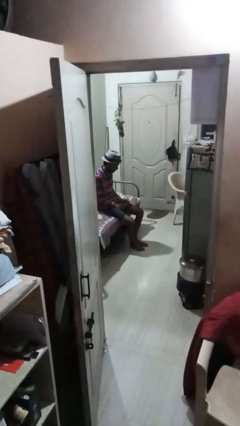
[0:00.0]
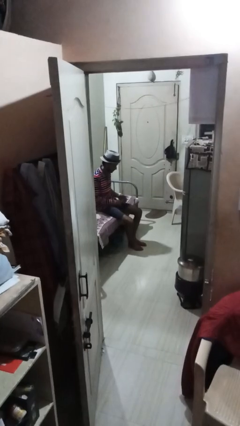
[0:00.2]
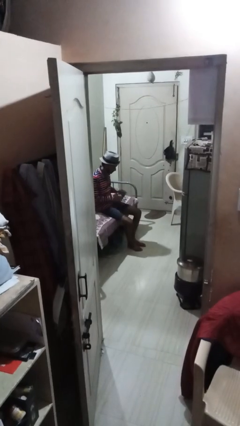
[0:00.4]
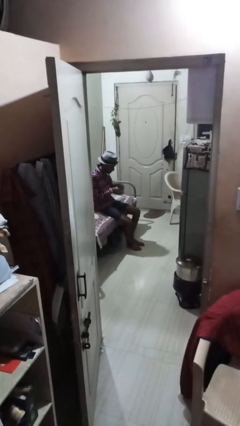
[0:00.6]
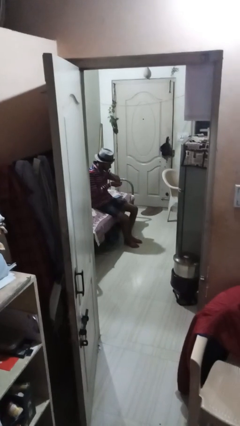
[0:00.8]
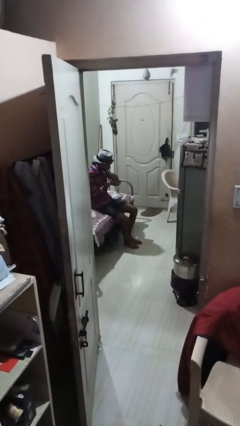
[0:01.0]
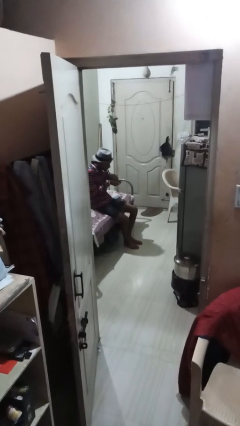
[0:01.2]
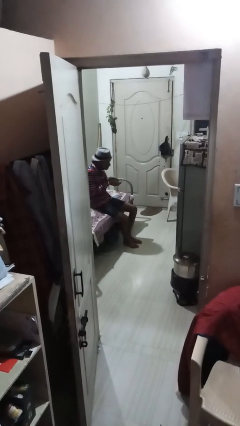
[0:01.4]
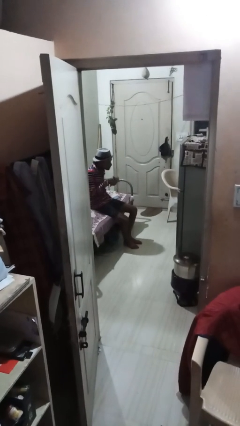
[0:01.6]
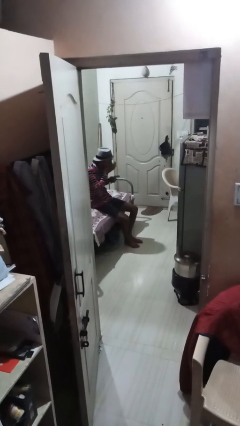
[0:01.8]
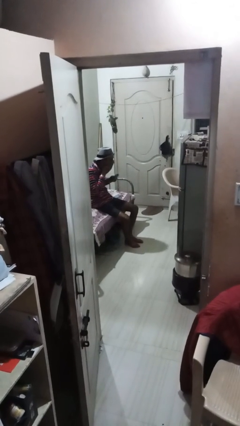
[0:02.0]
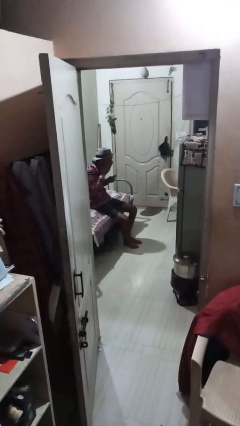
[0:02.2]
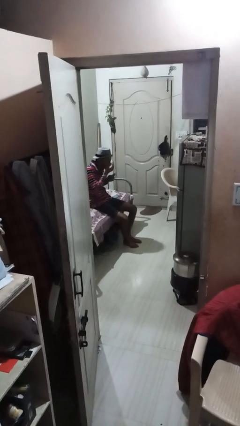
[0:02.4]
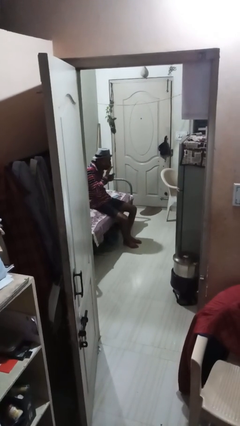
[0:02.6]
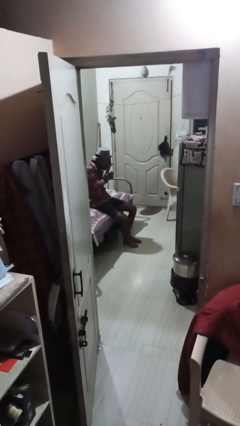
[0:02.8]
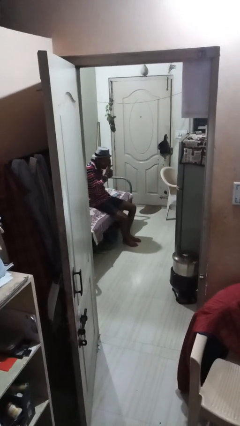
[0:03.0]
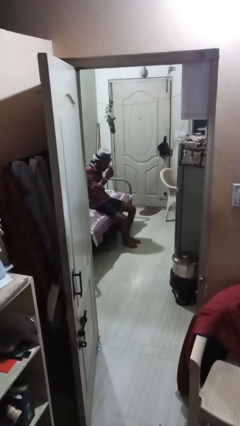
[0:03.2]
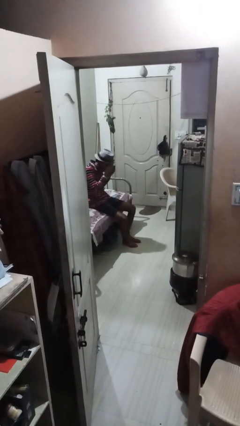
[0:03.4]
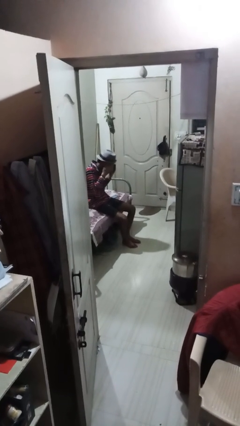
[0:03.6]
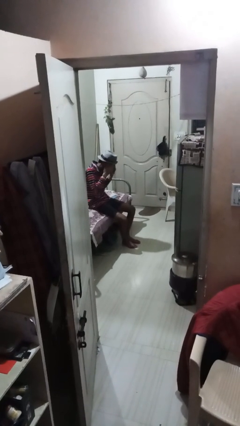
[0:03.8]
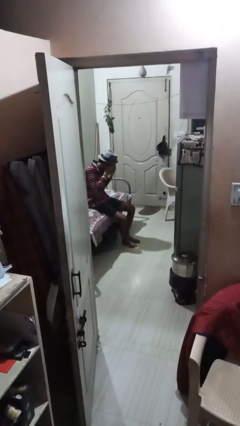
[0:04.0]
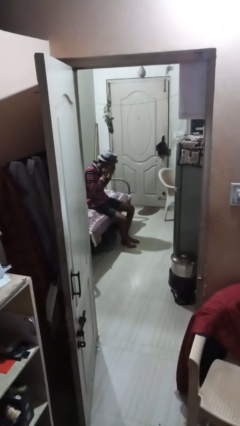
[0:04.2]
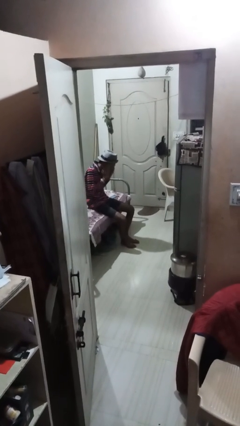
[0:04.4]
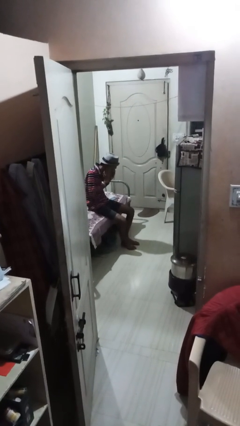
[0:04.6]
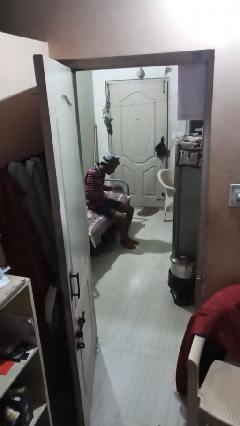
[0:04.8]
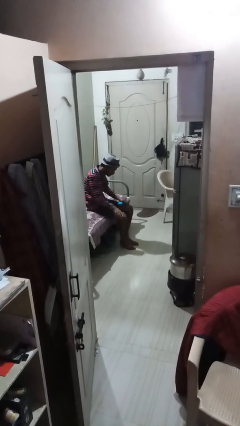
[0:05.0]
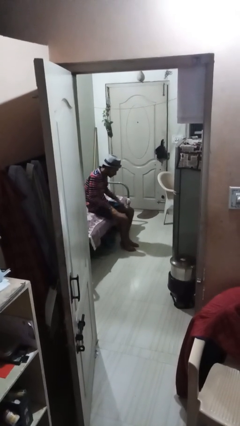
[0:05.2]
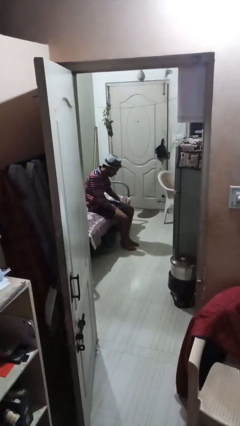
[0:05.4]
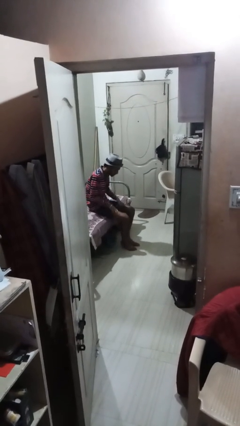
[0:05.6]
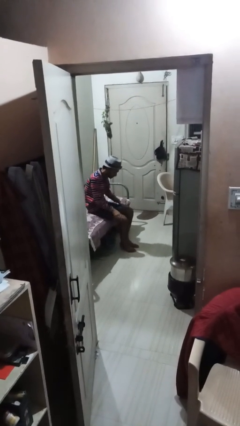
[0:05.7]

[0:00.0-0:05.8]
person applies facial moisturizer

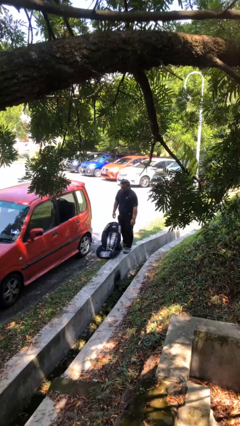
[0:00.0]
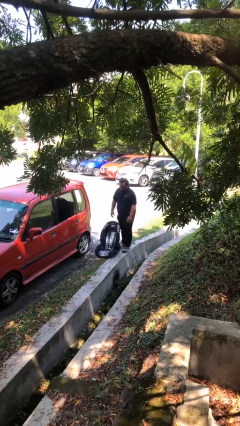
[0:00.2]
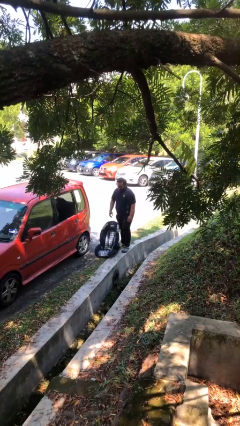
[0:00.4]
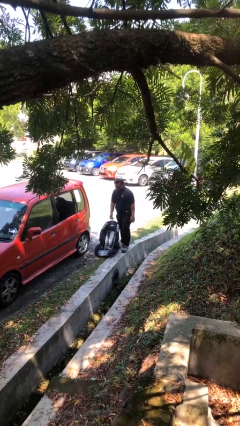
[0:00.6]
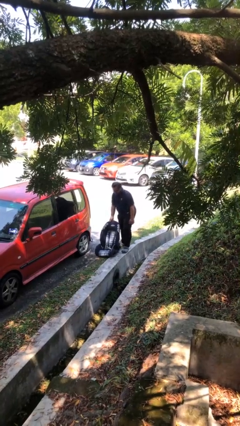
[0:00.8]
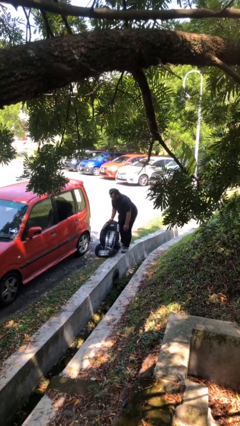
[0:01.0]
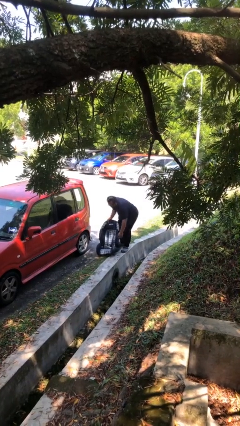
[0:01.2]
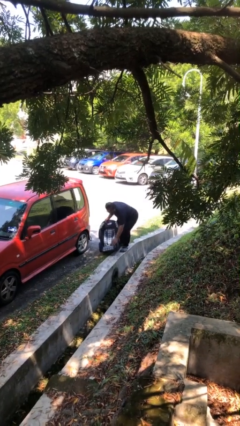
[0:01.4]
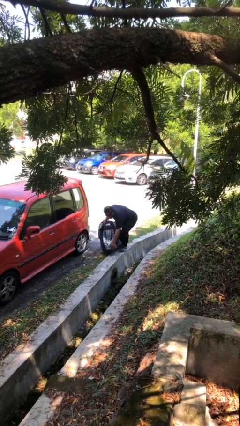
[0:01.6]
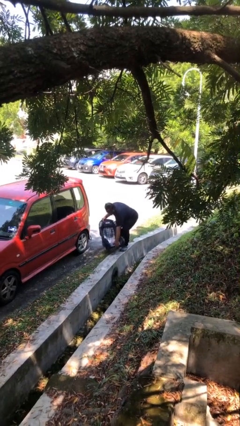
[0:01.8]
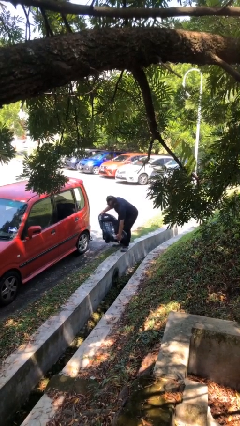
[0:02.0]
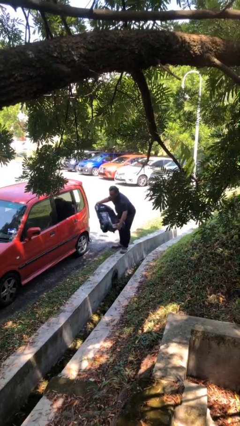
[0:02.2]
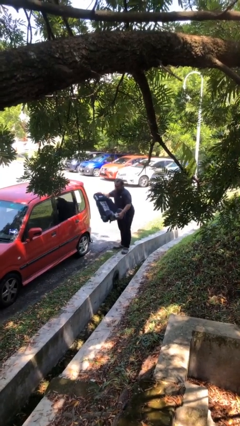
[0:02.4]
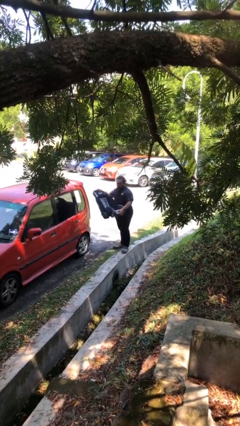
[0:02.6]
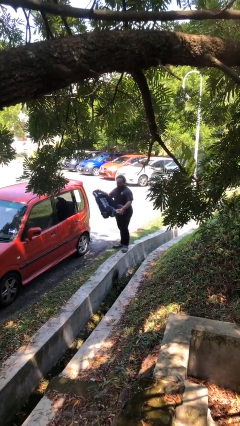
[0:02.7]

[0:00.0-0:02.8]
person picks up object from floor

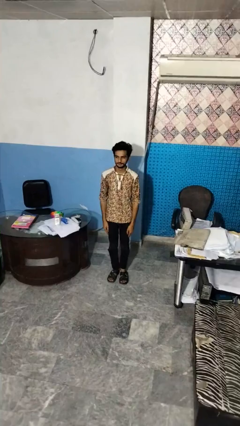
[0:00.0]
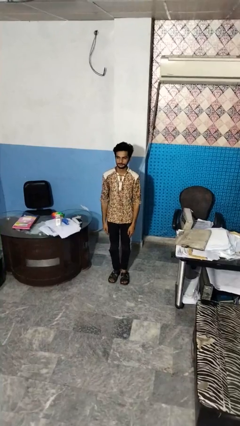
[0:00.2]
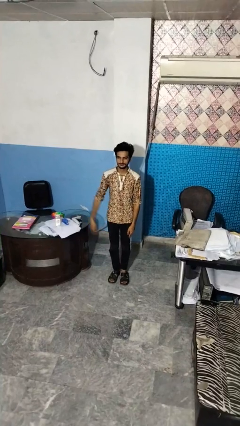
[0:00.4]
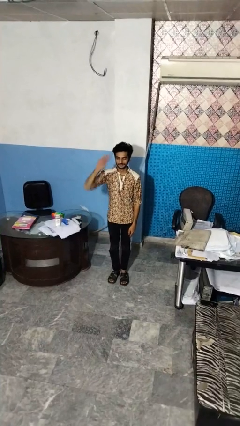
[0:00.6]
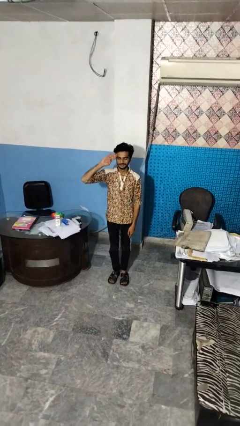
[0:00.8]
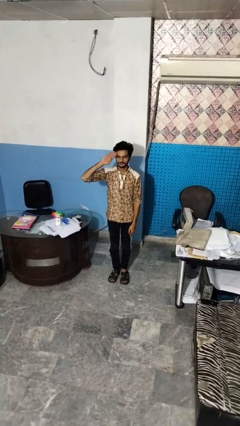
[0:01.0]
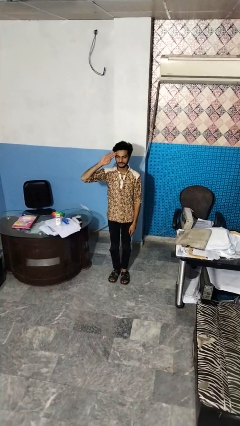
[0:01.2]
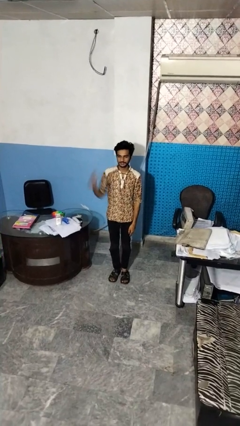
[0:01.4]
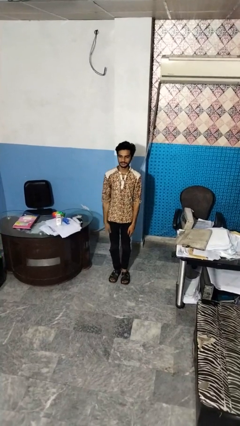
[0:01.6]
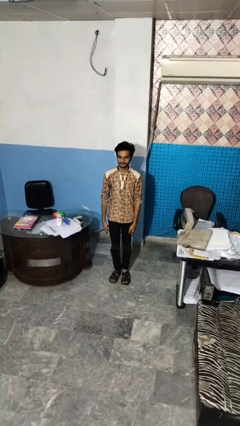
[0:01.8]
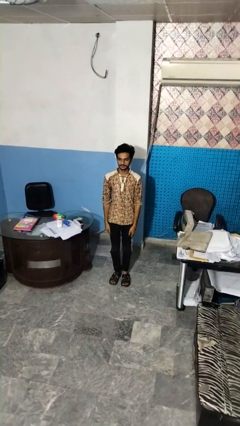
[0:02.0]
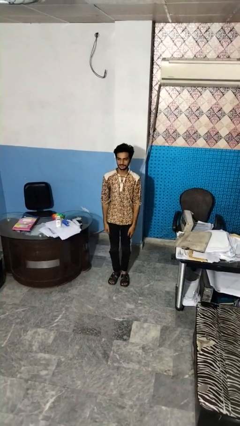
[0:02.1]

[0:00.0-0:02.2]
person salutes

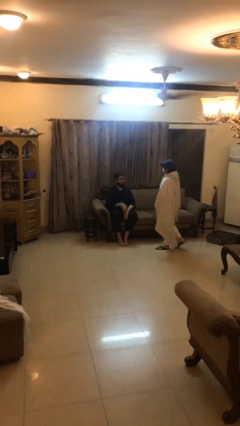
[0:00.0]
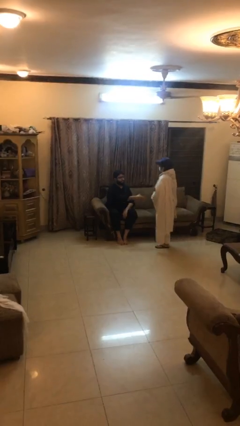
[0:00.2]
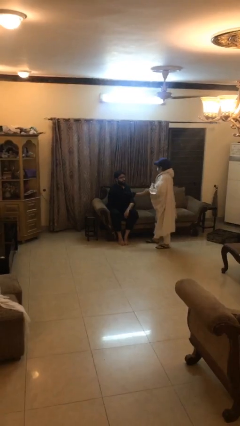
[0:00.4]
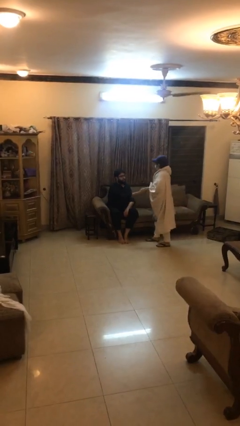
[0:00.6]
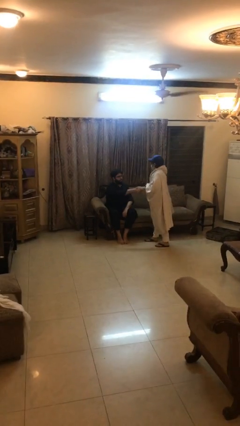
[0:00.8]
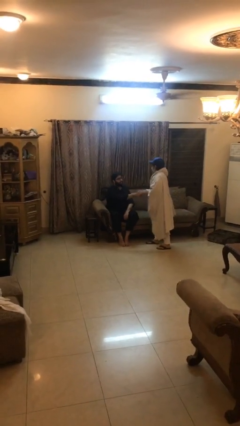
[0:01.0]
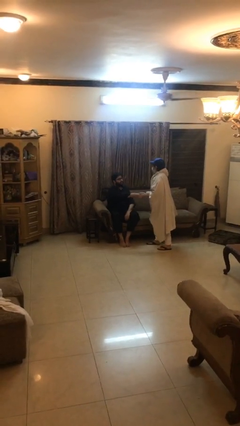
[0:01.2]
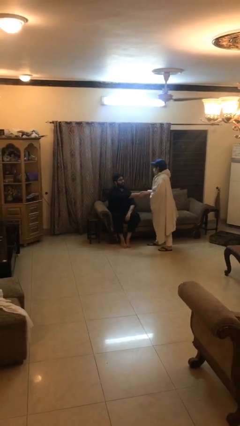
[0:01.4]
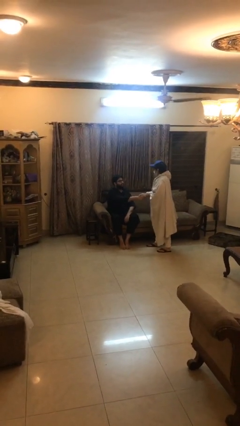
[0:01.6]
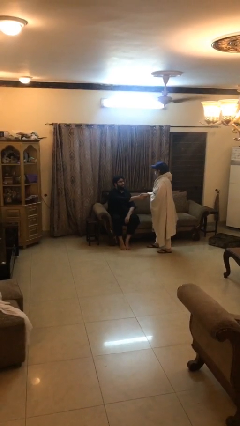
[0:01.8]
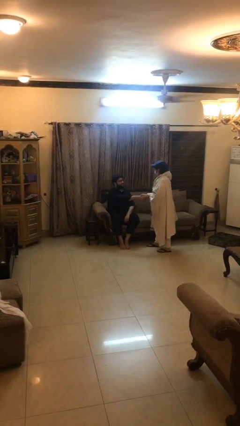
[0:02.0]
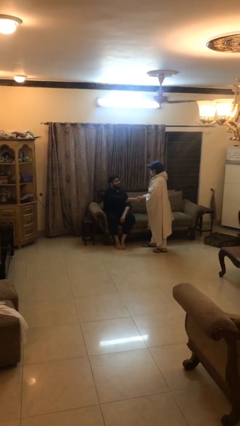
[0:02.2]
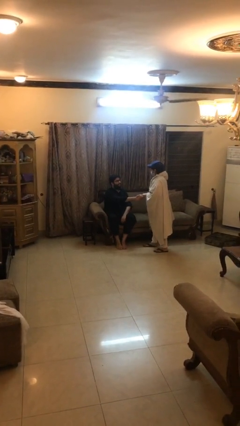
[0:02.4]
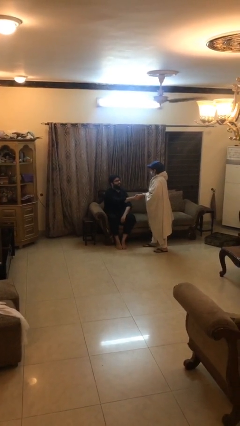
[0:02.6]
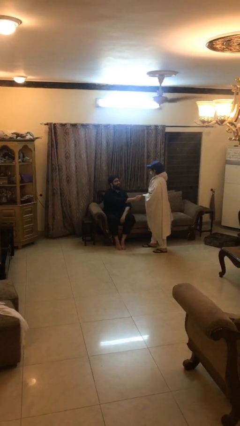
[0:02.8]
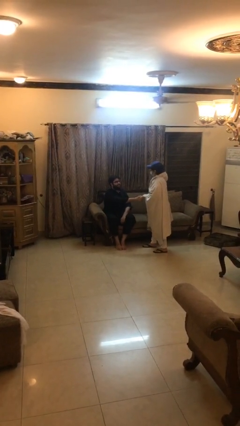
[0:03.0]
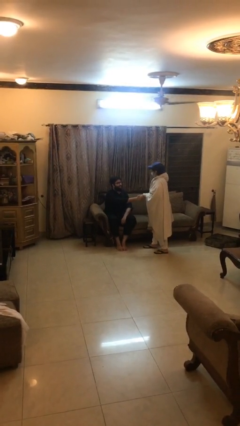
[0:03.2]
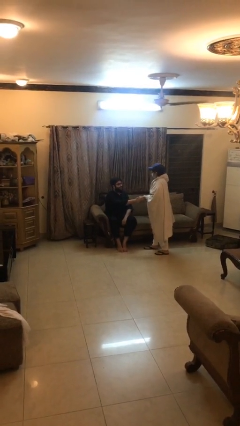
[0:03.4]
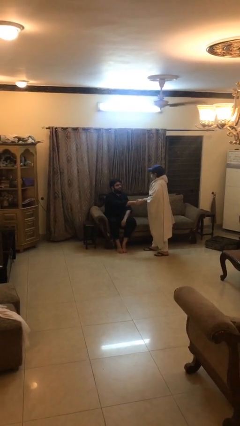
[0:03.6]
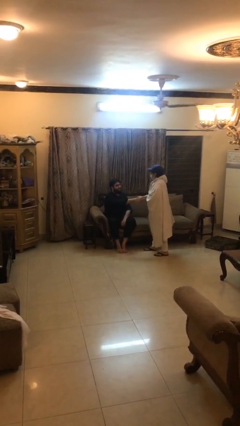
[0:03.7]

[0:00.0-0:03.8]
person shakes hand

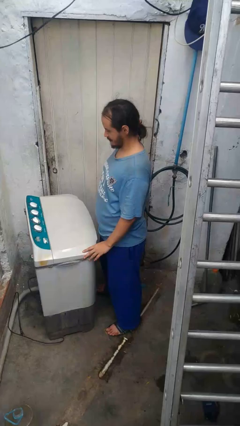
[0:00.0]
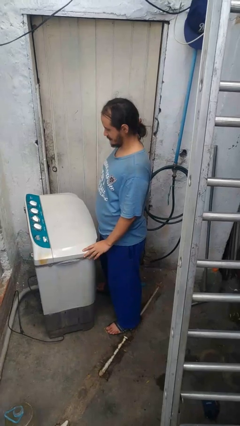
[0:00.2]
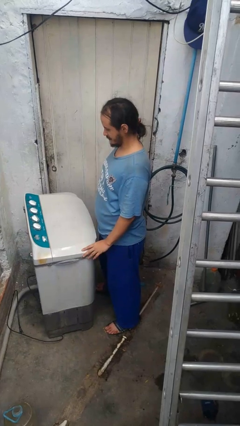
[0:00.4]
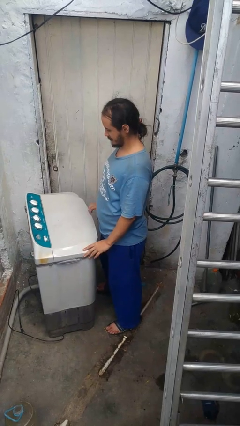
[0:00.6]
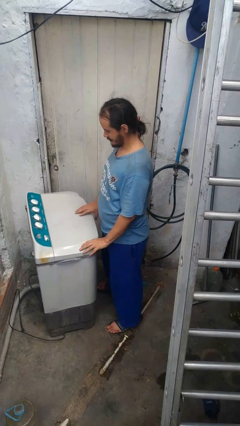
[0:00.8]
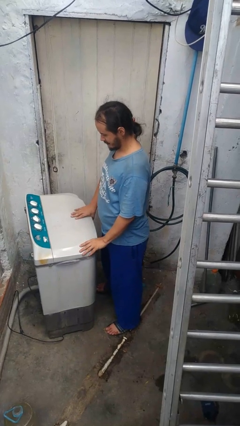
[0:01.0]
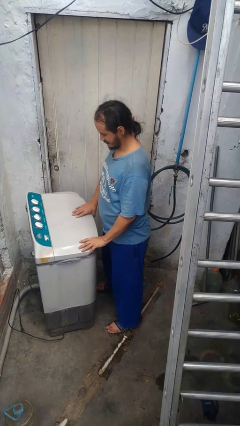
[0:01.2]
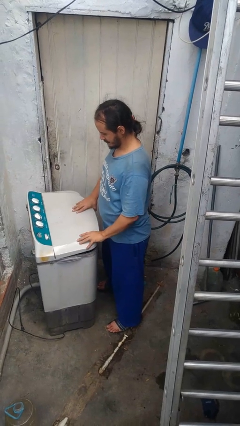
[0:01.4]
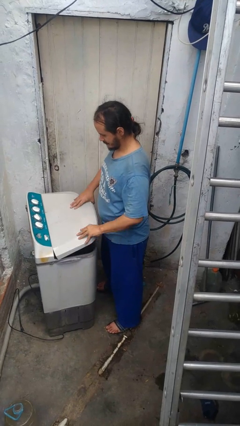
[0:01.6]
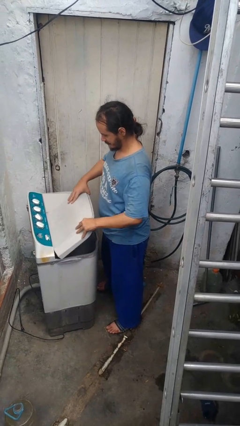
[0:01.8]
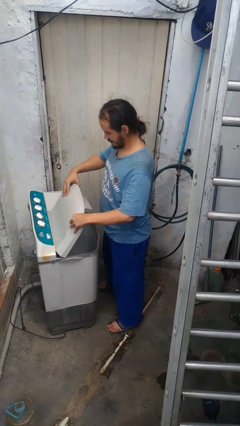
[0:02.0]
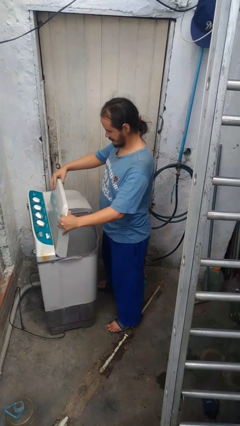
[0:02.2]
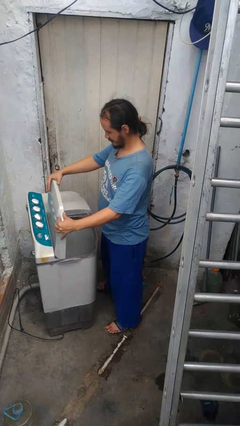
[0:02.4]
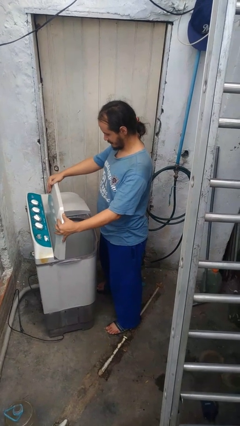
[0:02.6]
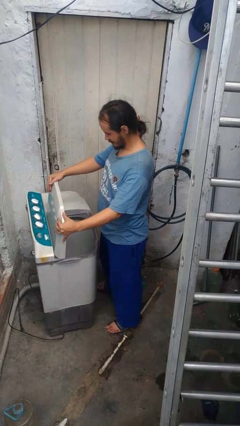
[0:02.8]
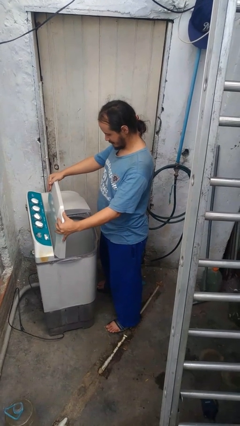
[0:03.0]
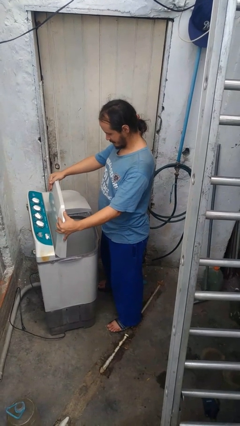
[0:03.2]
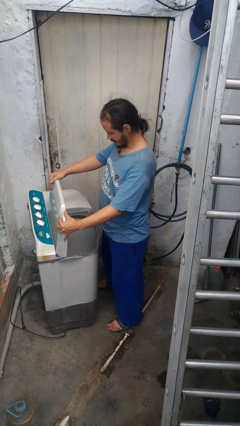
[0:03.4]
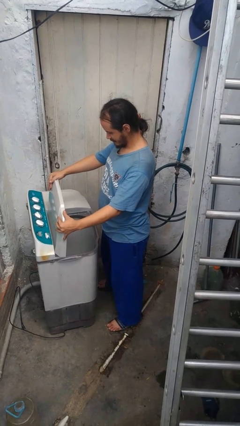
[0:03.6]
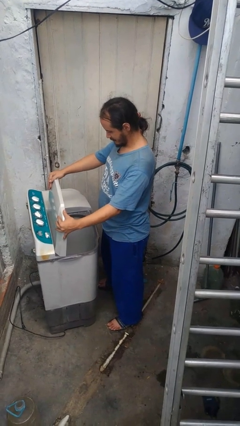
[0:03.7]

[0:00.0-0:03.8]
person opens clothes washer
